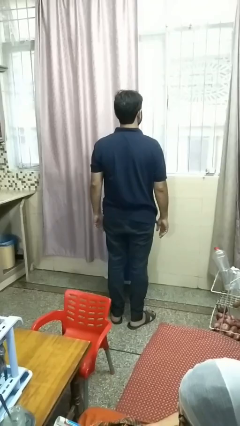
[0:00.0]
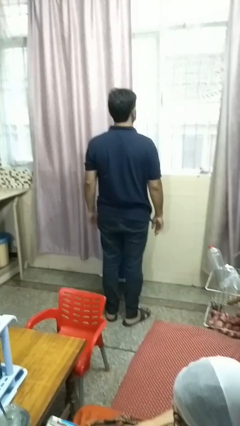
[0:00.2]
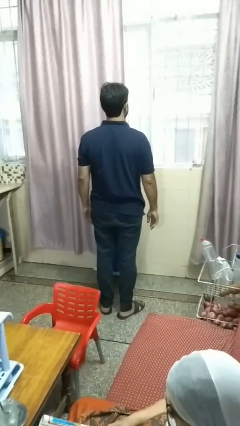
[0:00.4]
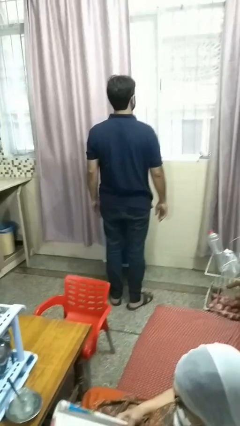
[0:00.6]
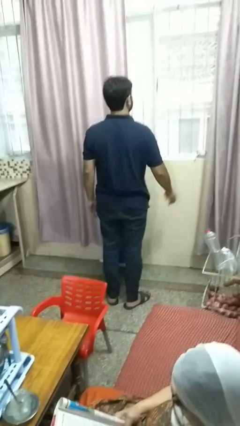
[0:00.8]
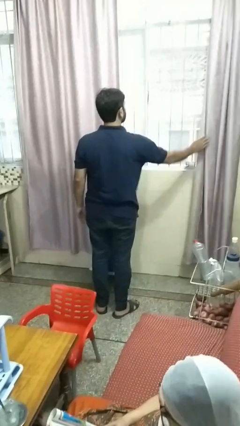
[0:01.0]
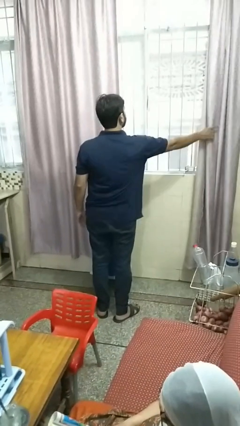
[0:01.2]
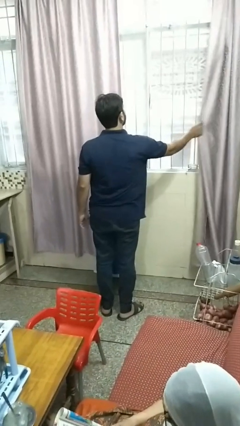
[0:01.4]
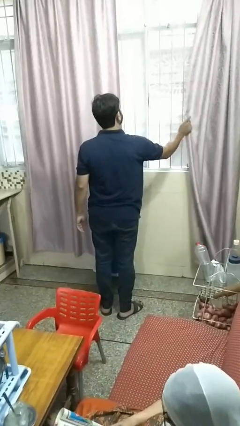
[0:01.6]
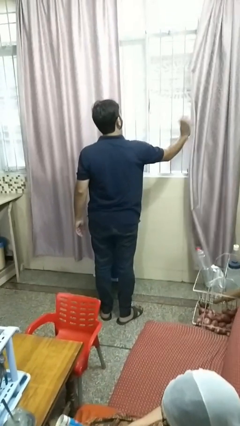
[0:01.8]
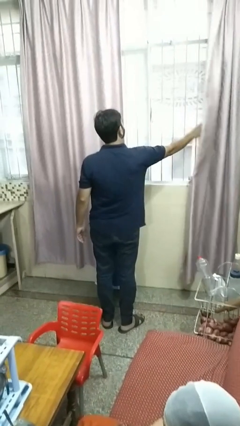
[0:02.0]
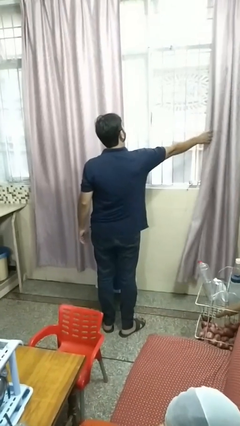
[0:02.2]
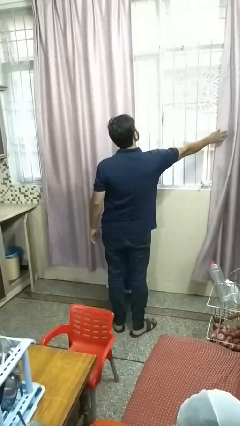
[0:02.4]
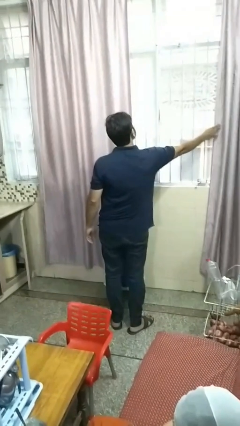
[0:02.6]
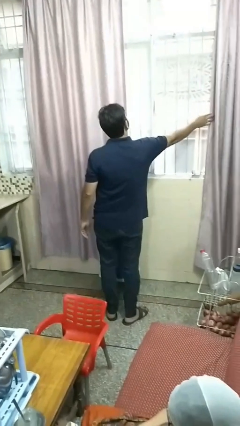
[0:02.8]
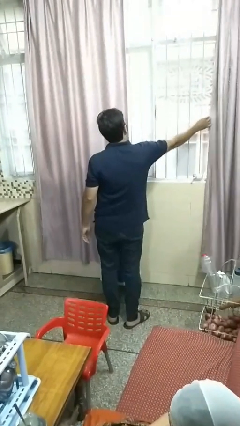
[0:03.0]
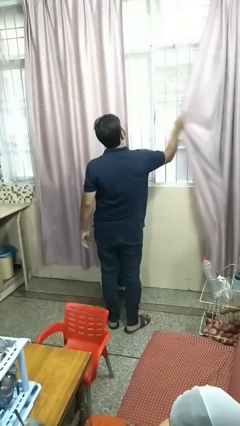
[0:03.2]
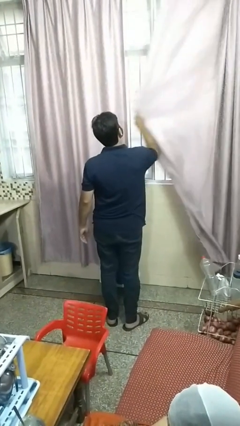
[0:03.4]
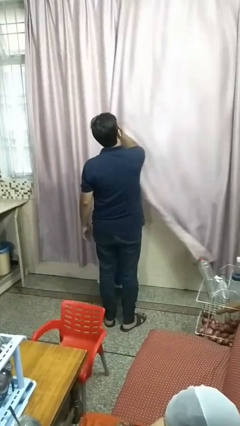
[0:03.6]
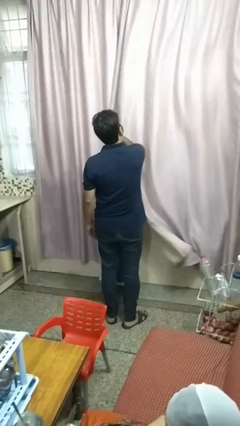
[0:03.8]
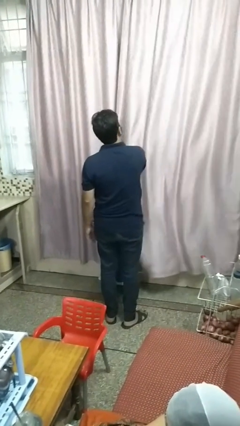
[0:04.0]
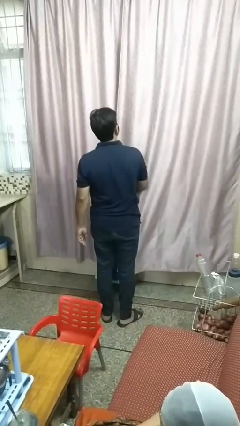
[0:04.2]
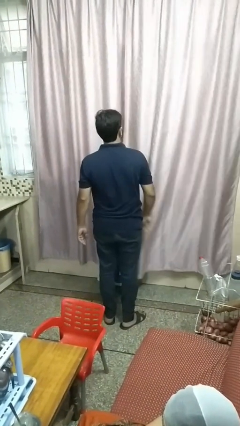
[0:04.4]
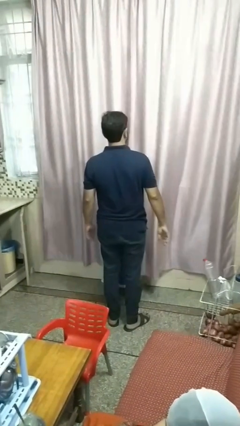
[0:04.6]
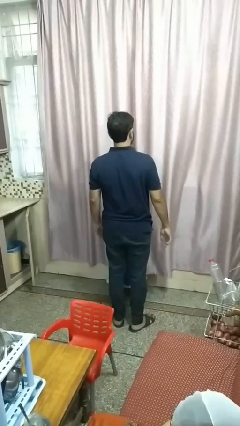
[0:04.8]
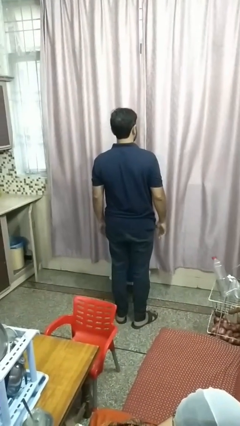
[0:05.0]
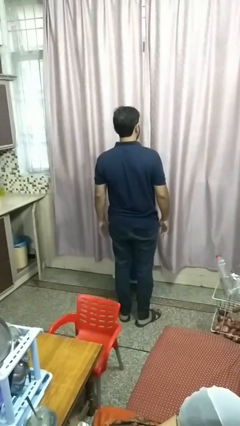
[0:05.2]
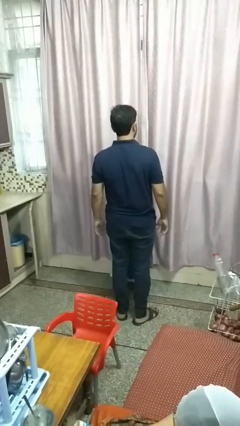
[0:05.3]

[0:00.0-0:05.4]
person closes curtains

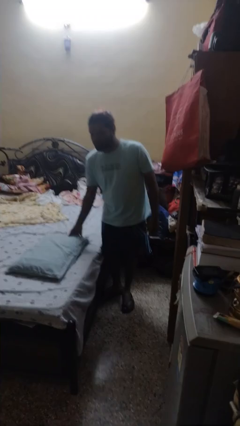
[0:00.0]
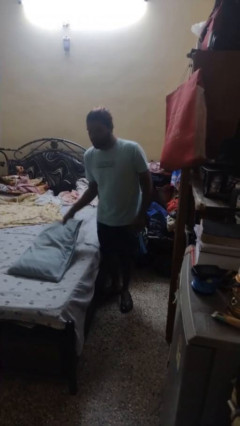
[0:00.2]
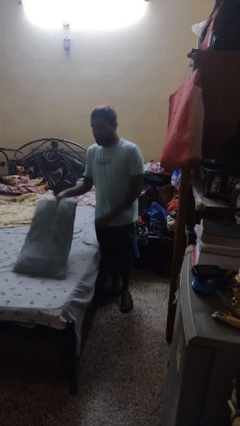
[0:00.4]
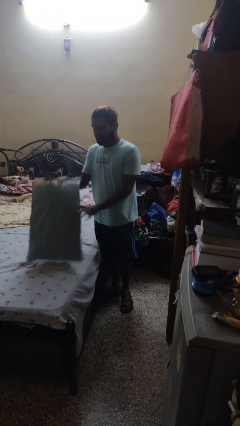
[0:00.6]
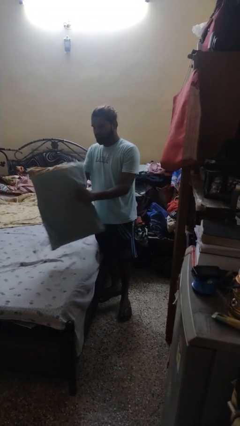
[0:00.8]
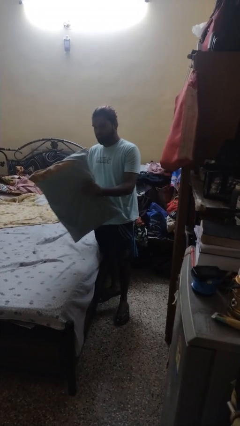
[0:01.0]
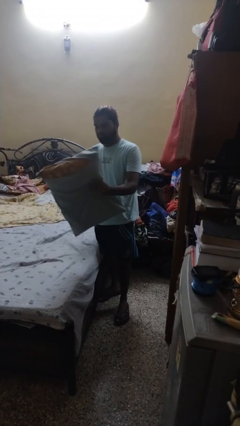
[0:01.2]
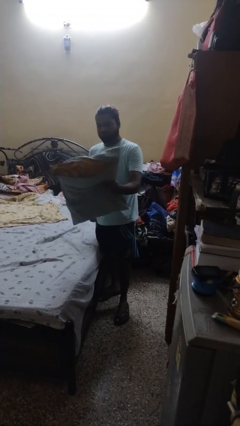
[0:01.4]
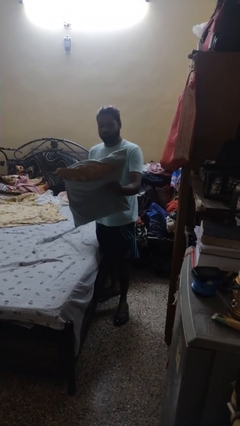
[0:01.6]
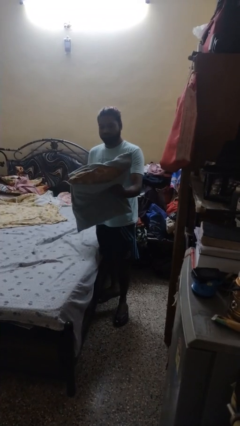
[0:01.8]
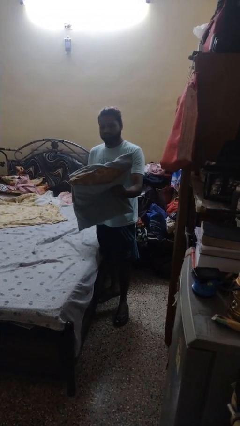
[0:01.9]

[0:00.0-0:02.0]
person picks up object from bed

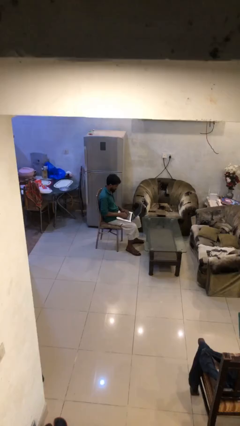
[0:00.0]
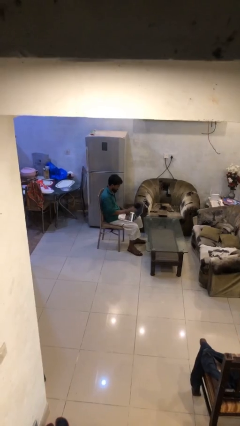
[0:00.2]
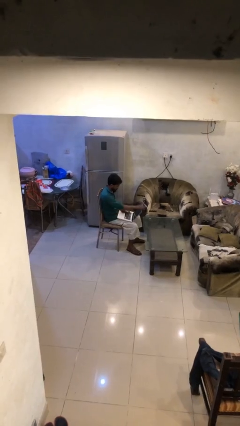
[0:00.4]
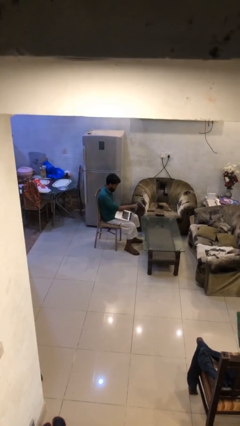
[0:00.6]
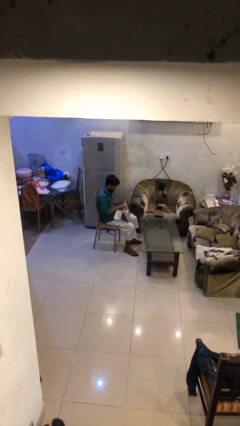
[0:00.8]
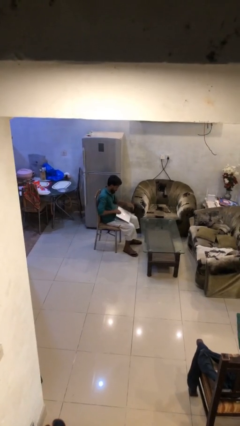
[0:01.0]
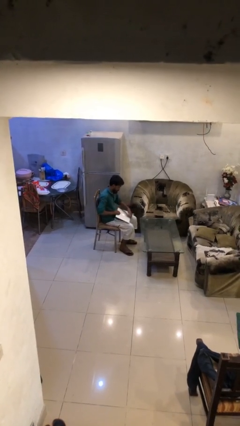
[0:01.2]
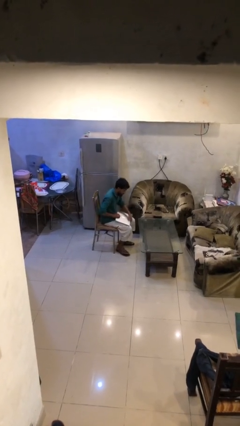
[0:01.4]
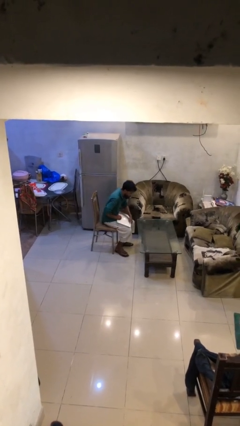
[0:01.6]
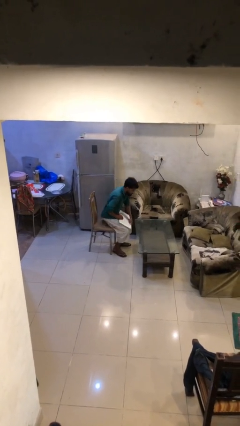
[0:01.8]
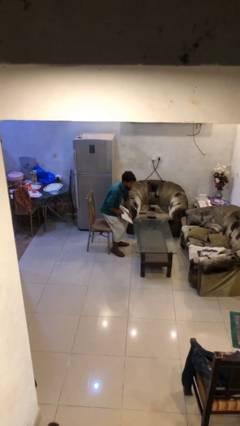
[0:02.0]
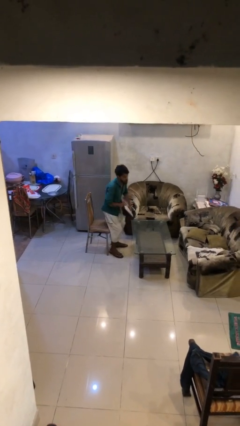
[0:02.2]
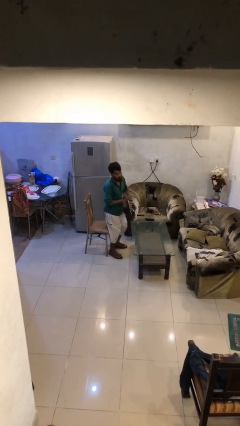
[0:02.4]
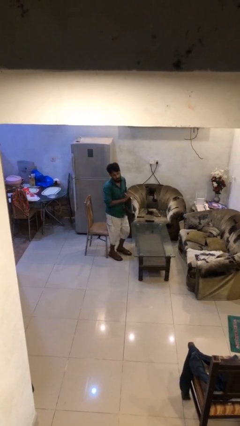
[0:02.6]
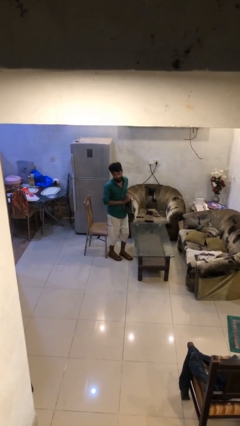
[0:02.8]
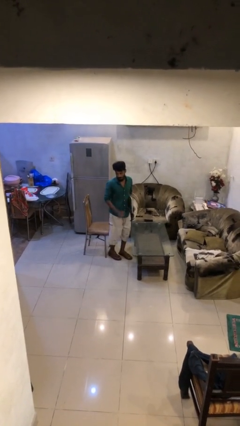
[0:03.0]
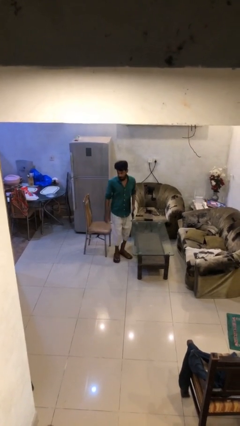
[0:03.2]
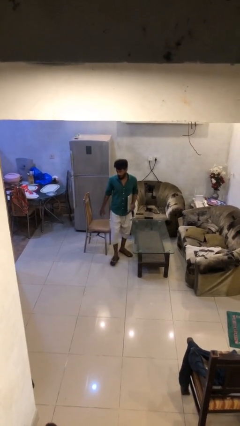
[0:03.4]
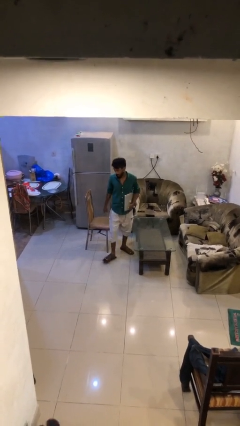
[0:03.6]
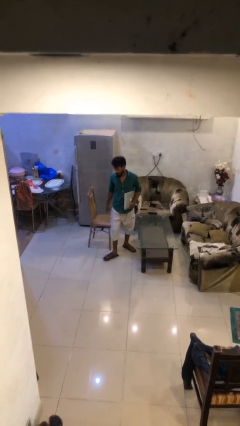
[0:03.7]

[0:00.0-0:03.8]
person stands up

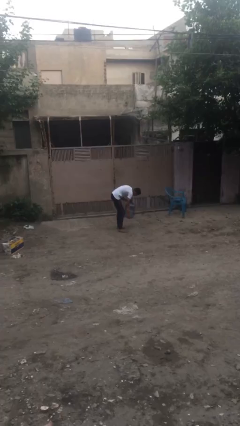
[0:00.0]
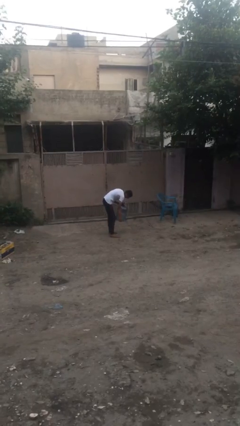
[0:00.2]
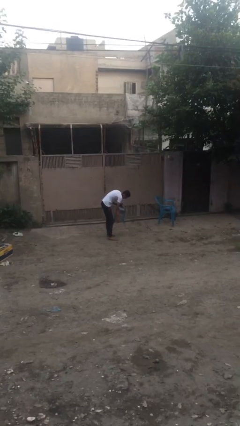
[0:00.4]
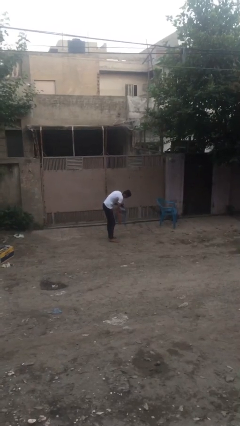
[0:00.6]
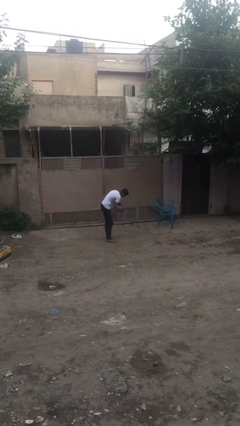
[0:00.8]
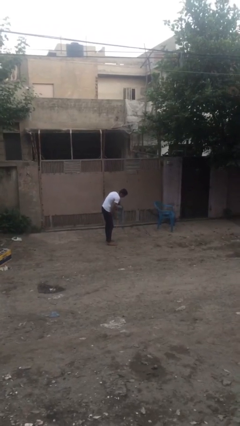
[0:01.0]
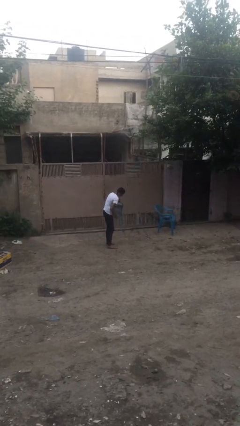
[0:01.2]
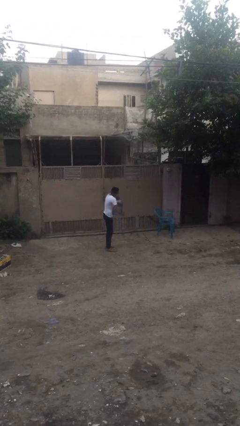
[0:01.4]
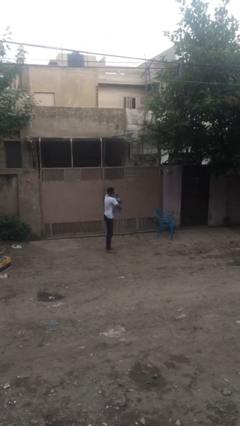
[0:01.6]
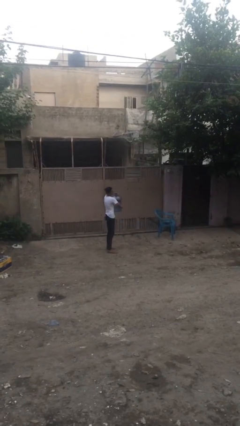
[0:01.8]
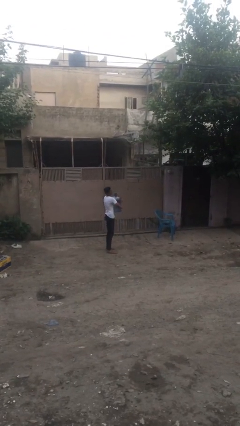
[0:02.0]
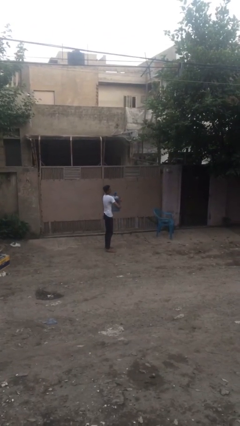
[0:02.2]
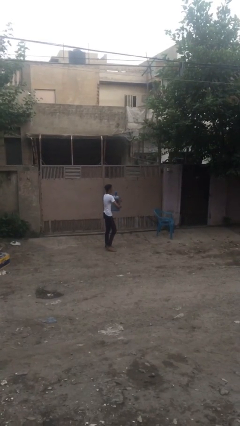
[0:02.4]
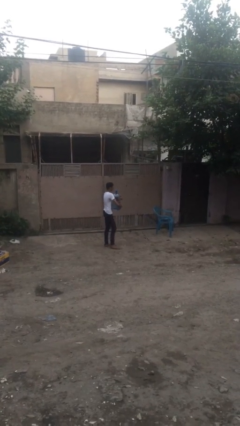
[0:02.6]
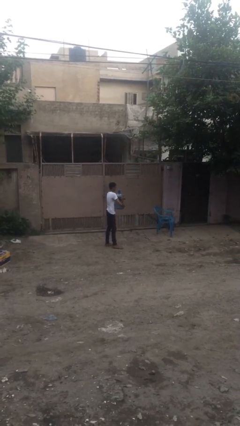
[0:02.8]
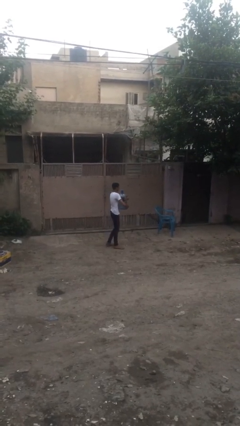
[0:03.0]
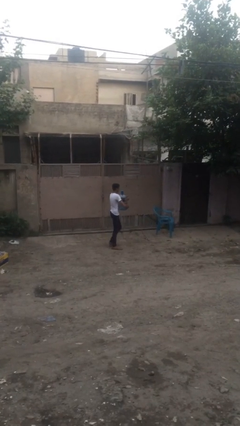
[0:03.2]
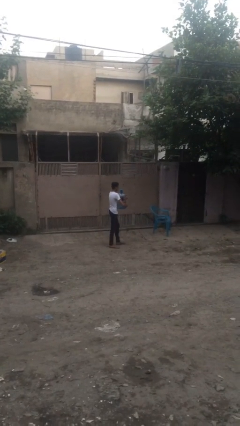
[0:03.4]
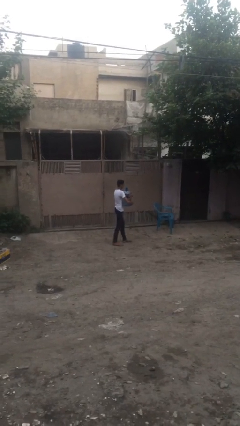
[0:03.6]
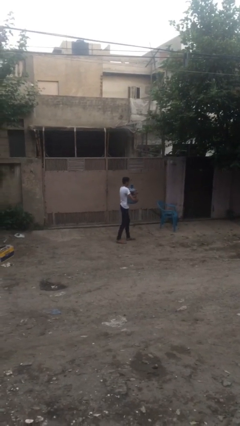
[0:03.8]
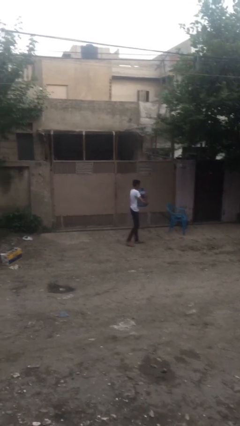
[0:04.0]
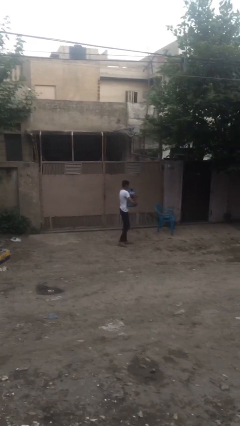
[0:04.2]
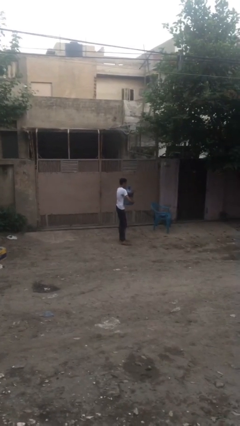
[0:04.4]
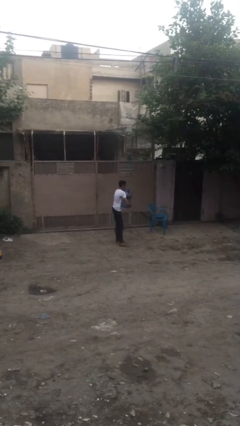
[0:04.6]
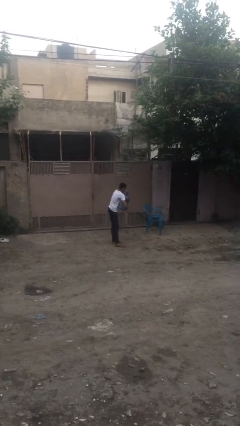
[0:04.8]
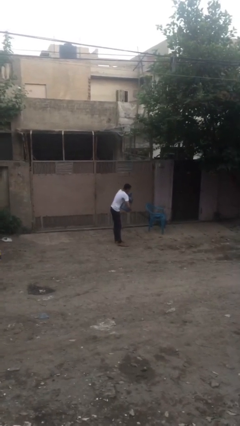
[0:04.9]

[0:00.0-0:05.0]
person carries heavy object

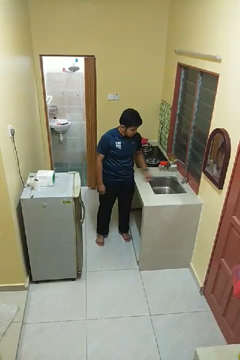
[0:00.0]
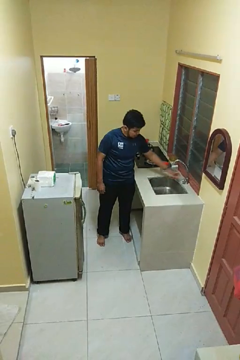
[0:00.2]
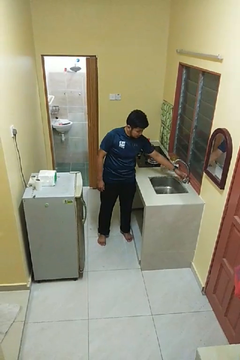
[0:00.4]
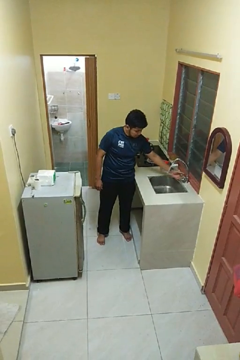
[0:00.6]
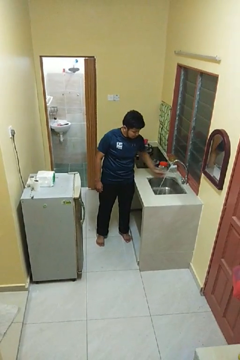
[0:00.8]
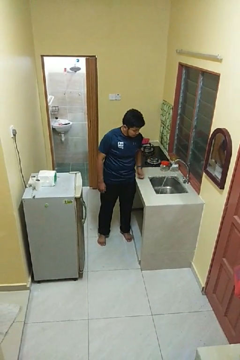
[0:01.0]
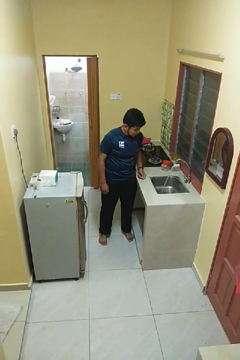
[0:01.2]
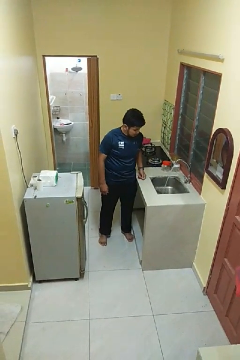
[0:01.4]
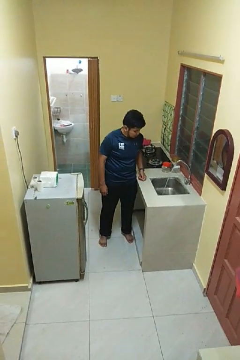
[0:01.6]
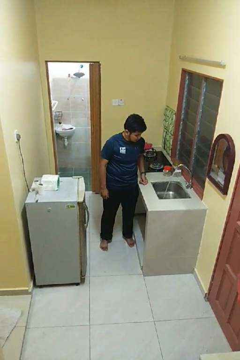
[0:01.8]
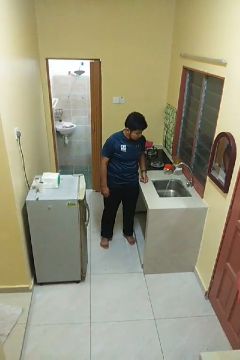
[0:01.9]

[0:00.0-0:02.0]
person turns on faucet
